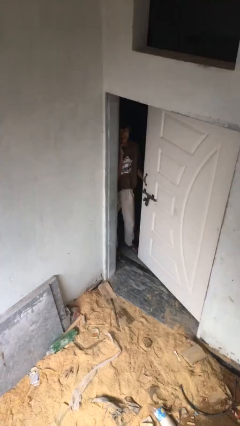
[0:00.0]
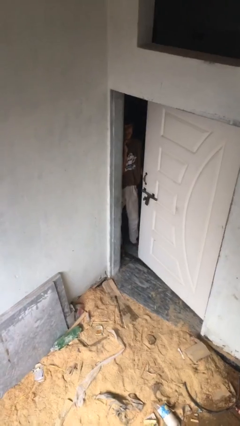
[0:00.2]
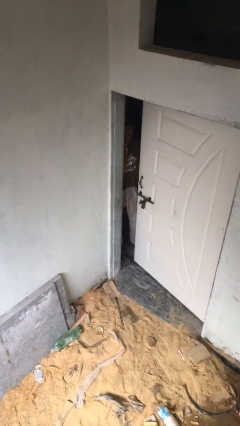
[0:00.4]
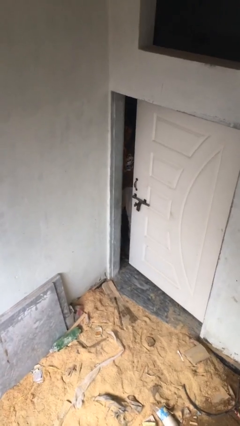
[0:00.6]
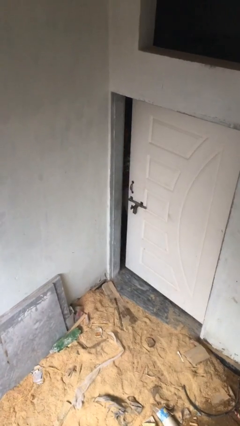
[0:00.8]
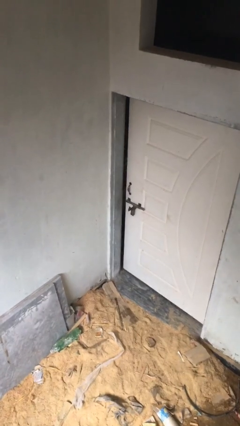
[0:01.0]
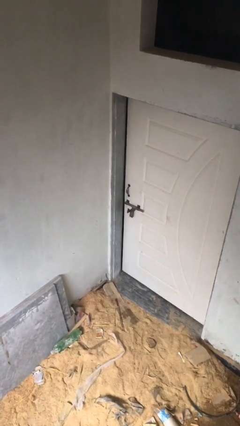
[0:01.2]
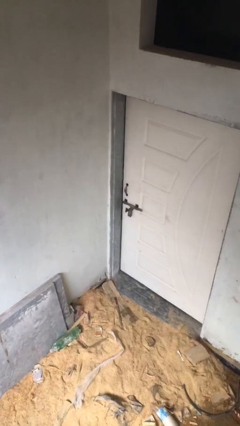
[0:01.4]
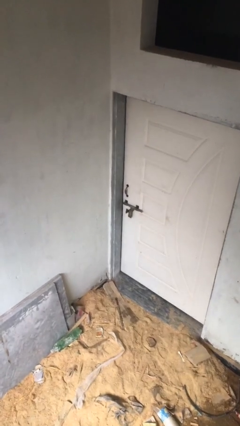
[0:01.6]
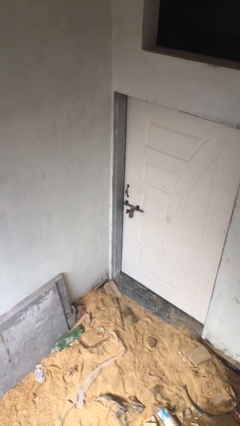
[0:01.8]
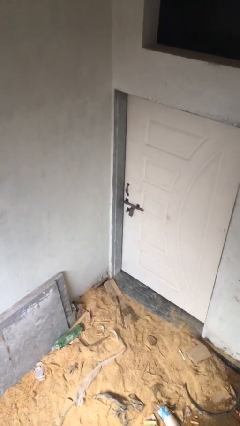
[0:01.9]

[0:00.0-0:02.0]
person closes facility door

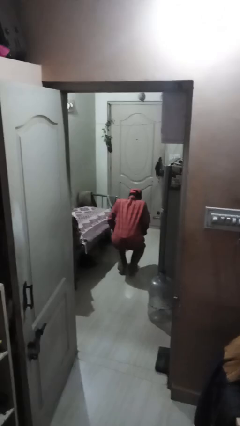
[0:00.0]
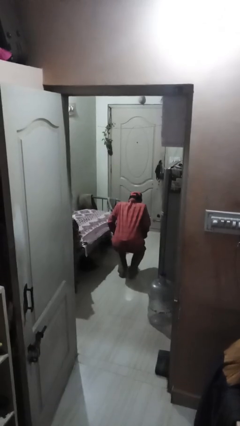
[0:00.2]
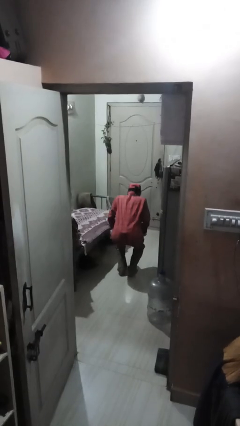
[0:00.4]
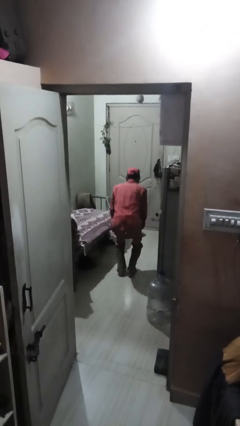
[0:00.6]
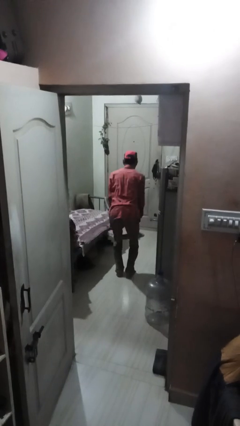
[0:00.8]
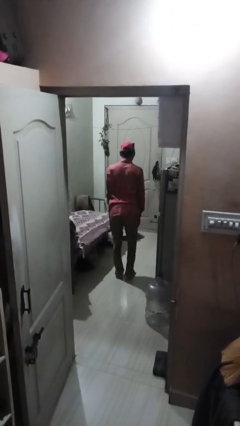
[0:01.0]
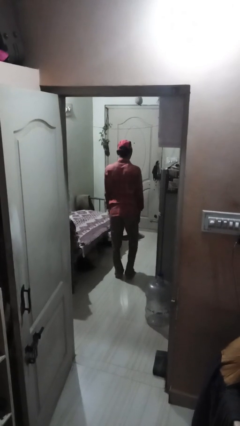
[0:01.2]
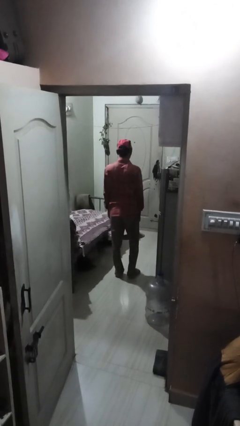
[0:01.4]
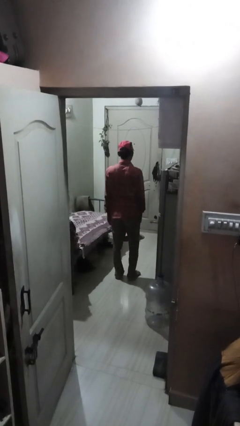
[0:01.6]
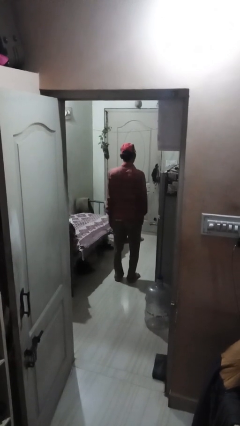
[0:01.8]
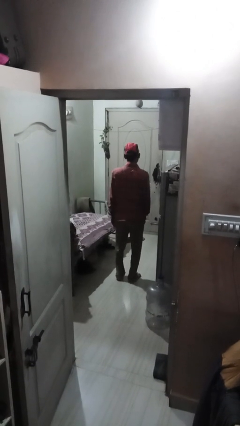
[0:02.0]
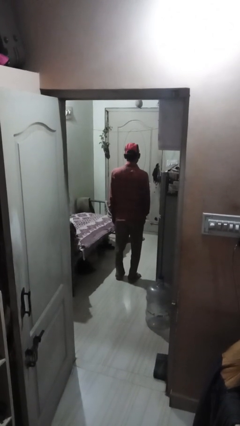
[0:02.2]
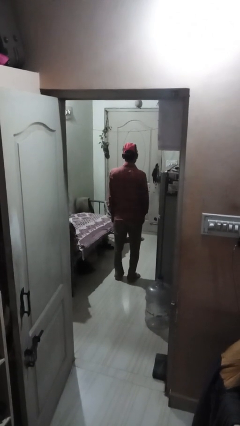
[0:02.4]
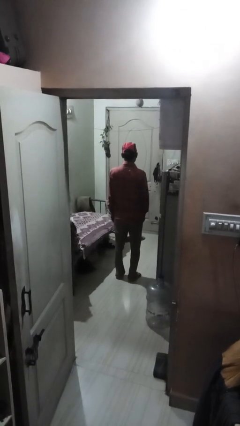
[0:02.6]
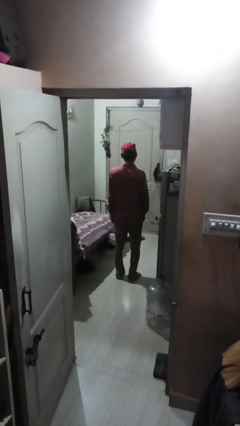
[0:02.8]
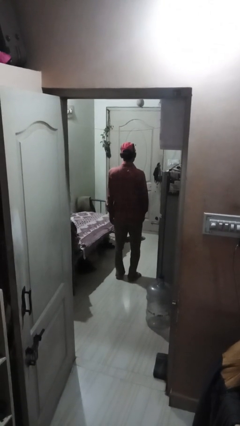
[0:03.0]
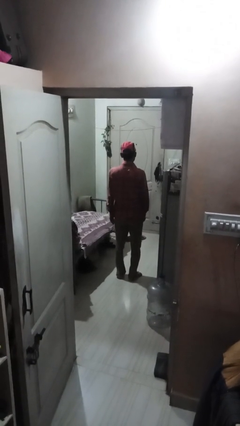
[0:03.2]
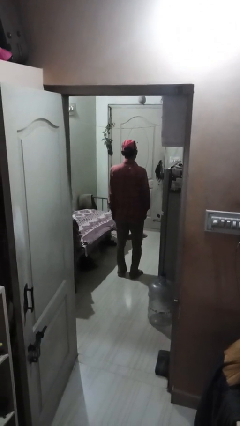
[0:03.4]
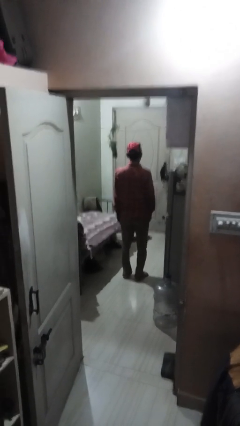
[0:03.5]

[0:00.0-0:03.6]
person stands up

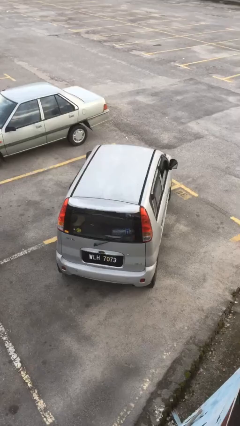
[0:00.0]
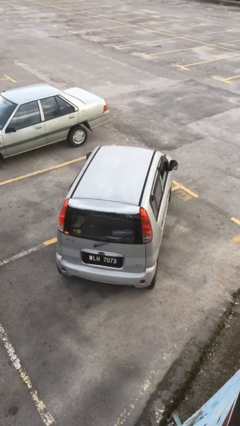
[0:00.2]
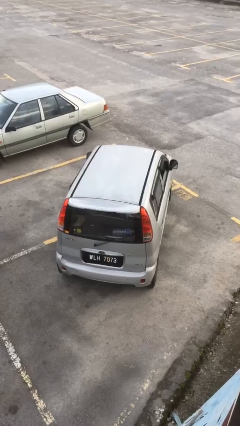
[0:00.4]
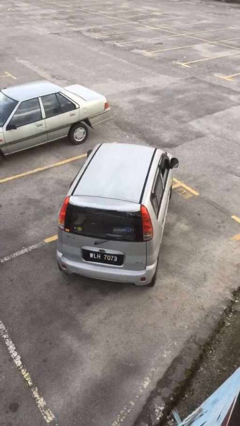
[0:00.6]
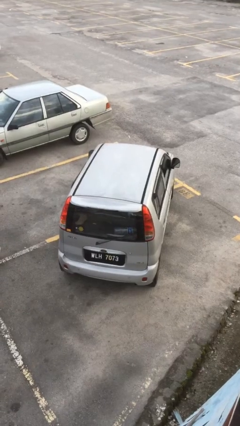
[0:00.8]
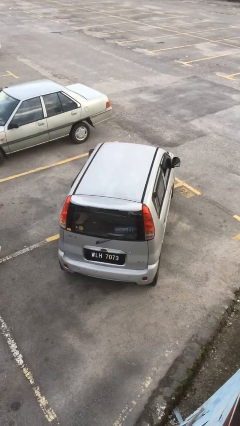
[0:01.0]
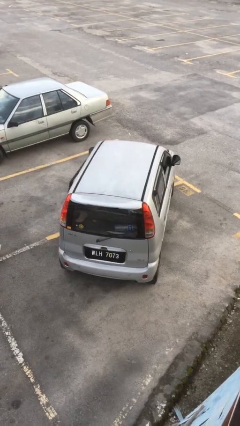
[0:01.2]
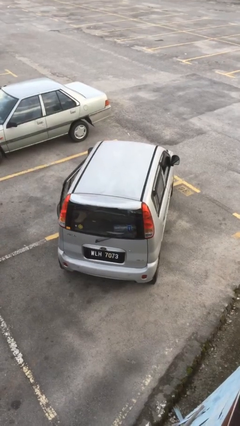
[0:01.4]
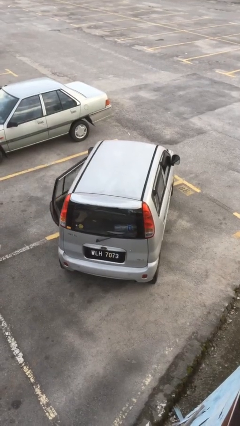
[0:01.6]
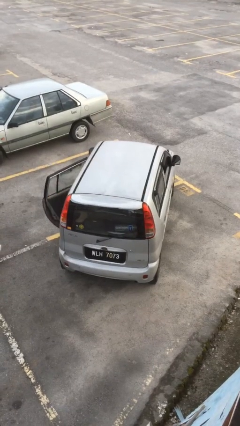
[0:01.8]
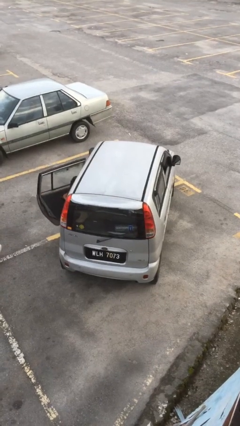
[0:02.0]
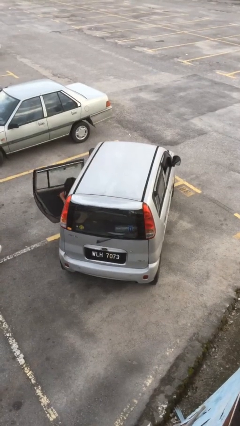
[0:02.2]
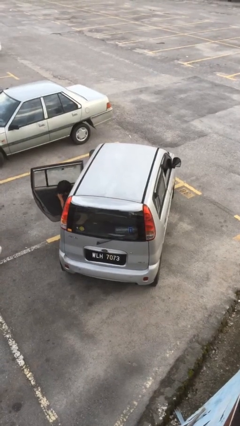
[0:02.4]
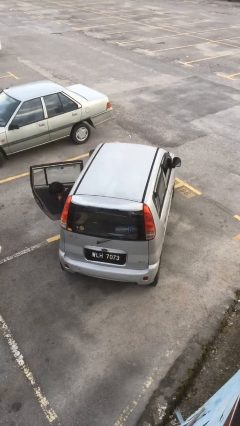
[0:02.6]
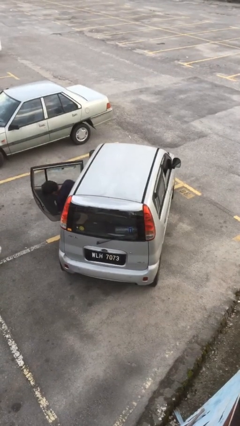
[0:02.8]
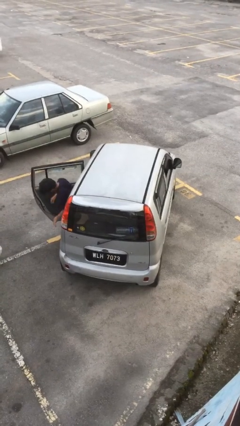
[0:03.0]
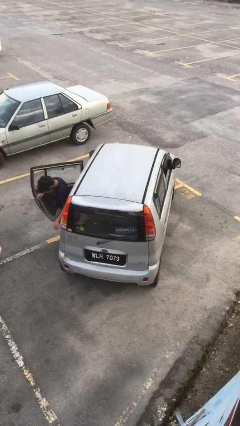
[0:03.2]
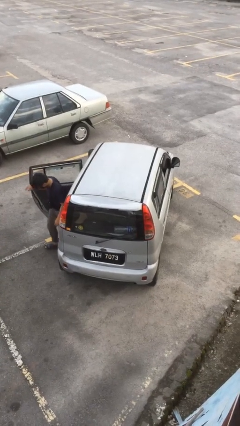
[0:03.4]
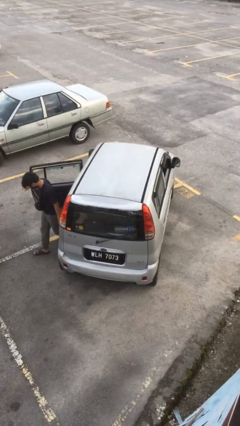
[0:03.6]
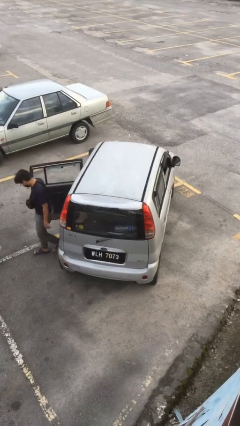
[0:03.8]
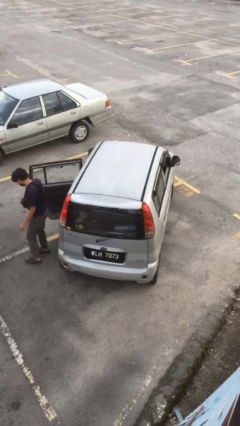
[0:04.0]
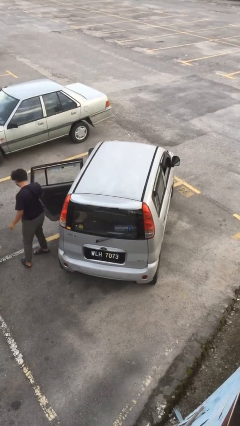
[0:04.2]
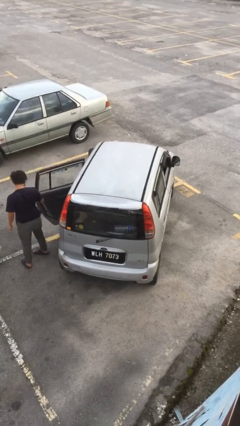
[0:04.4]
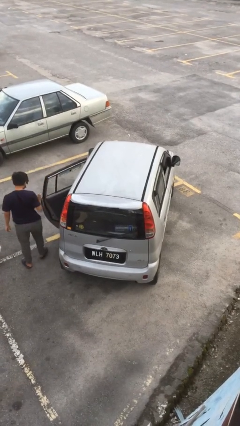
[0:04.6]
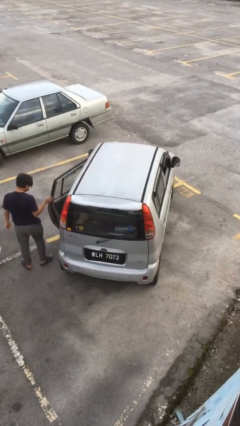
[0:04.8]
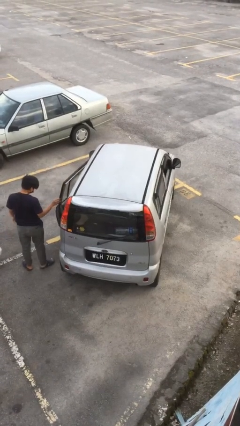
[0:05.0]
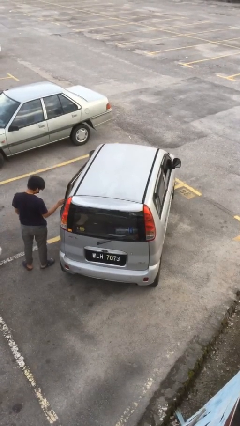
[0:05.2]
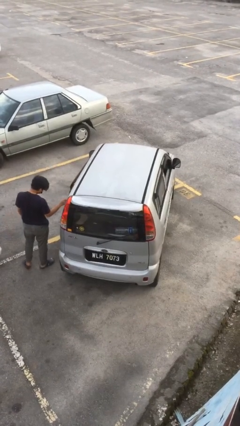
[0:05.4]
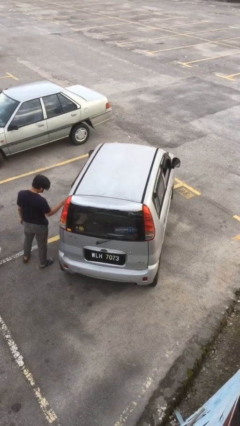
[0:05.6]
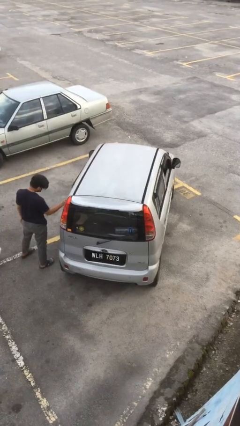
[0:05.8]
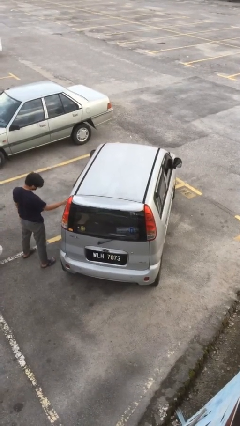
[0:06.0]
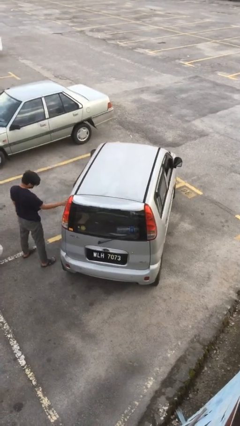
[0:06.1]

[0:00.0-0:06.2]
car drops off person

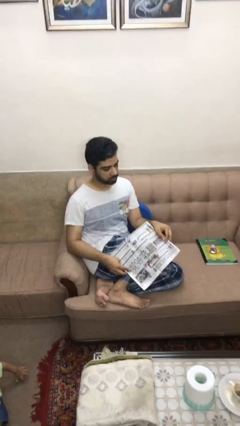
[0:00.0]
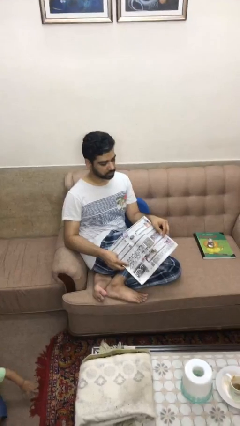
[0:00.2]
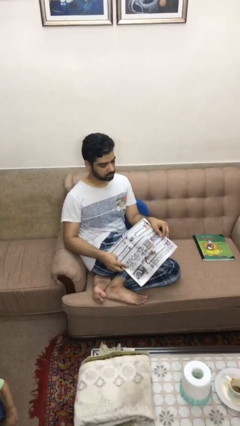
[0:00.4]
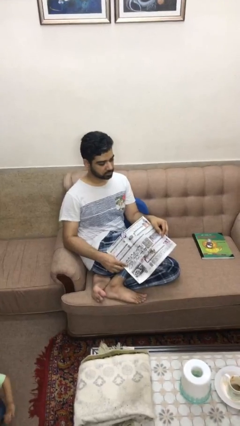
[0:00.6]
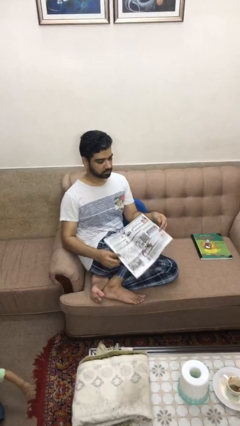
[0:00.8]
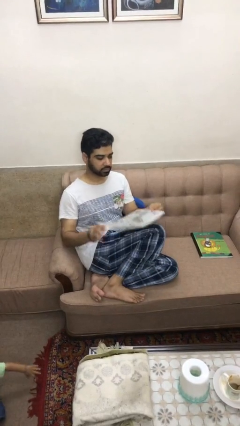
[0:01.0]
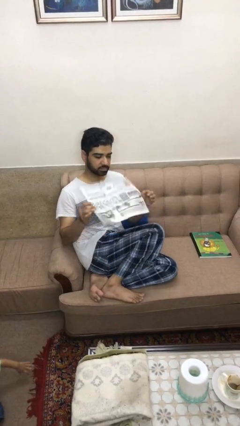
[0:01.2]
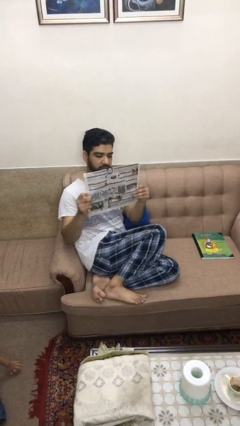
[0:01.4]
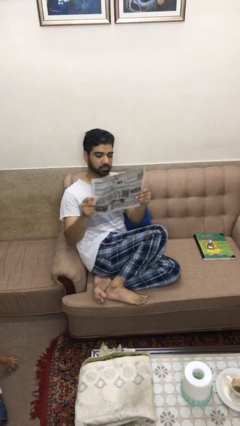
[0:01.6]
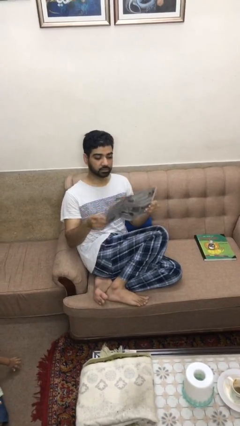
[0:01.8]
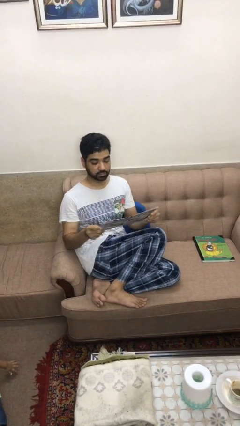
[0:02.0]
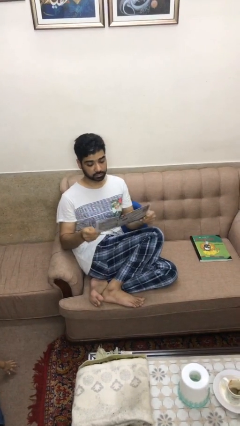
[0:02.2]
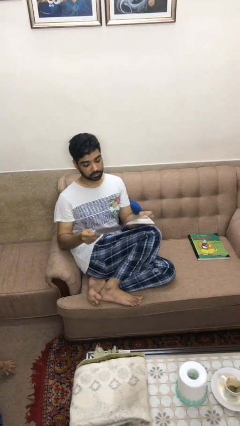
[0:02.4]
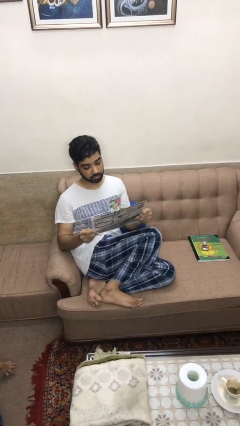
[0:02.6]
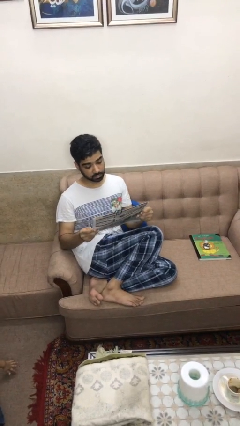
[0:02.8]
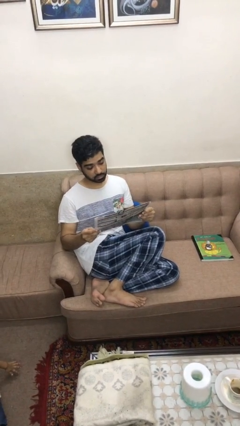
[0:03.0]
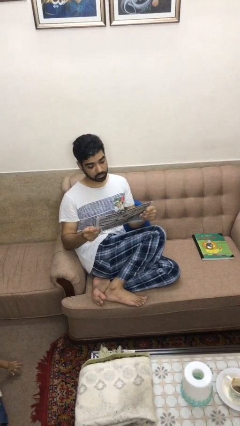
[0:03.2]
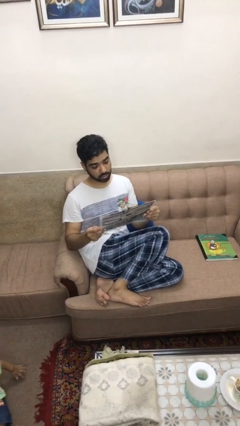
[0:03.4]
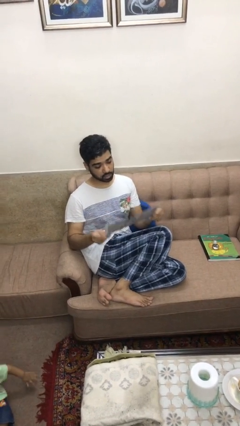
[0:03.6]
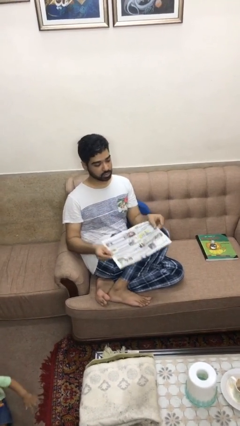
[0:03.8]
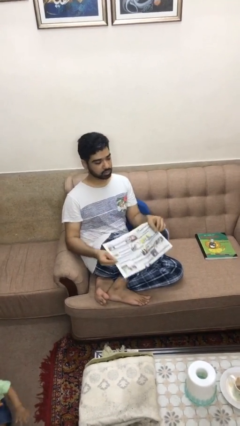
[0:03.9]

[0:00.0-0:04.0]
person reads newspaper

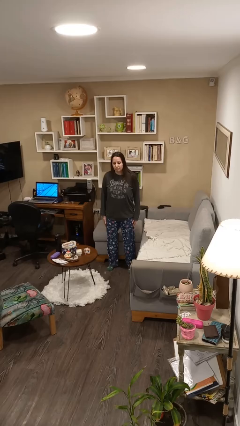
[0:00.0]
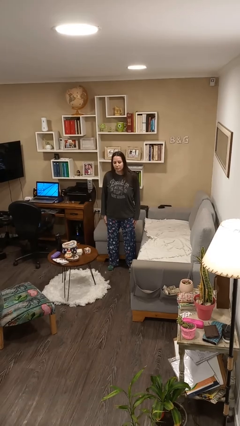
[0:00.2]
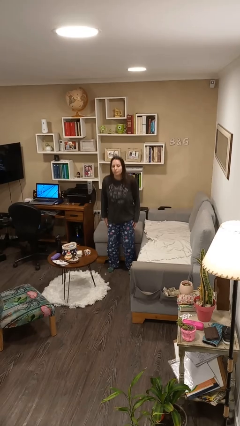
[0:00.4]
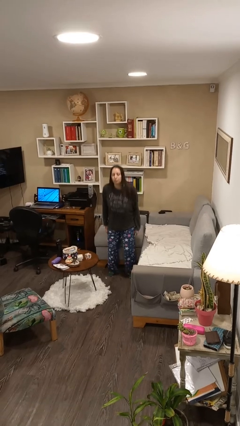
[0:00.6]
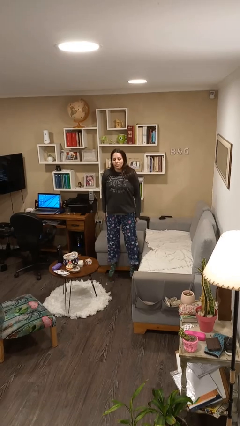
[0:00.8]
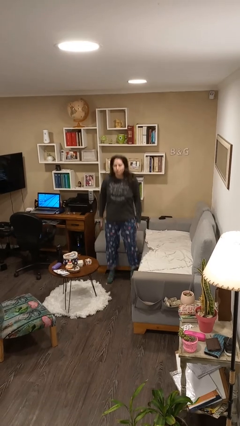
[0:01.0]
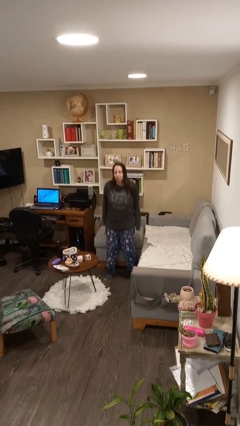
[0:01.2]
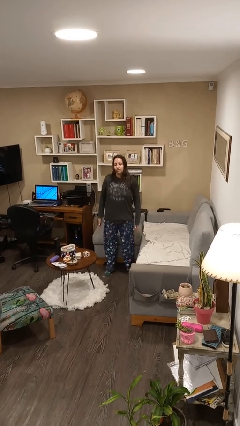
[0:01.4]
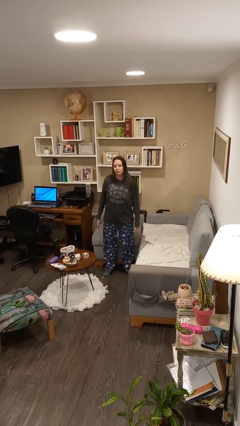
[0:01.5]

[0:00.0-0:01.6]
person jumps
